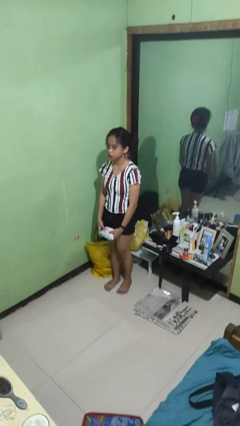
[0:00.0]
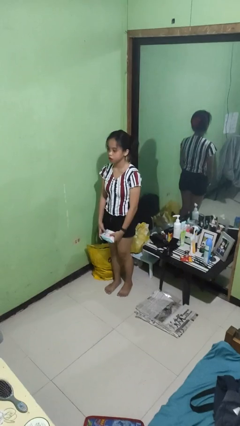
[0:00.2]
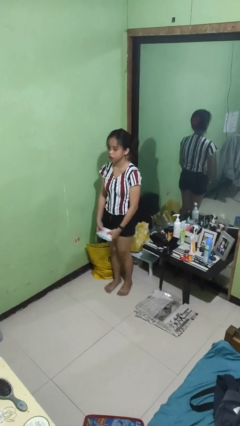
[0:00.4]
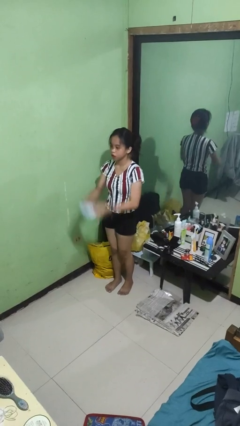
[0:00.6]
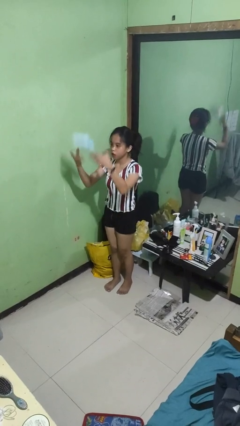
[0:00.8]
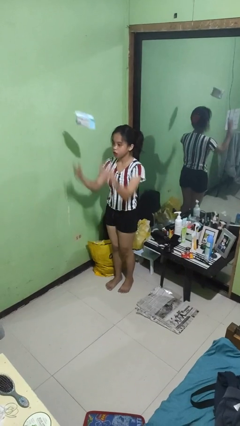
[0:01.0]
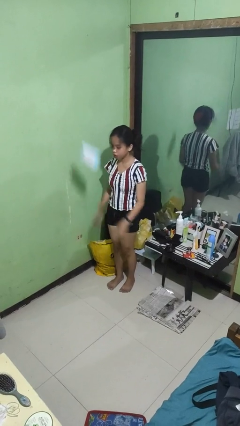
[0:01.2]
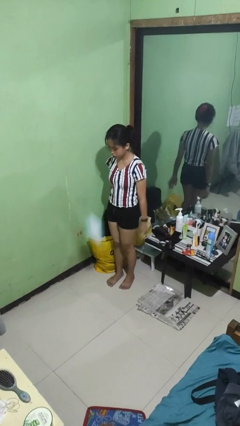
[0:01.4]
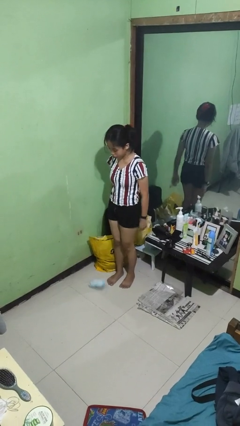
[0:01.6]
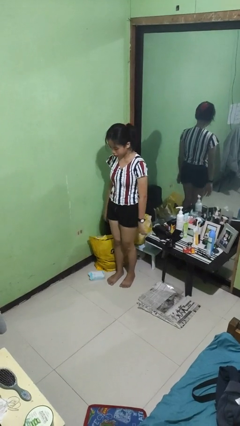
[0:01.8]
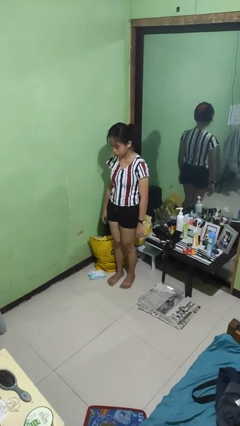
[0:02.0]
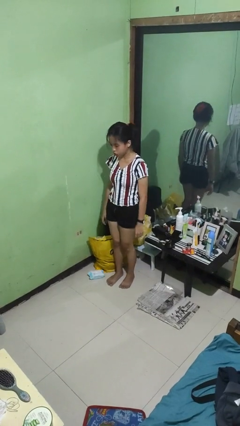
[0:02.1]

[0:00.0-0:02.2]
person throws object into air

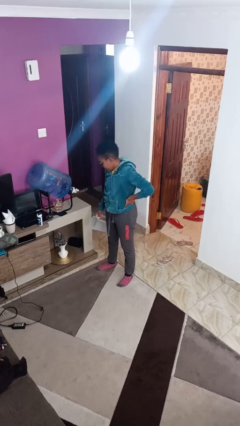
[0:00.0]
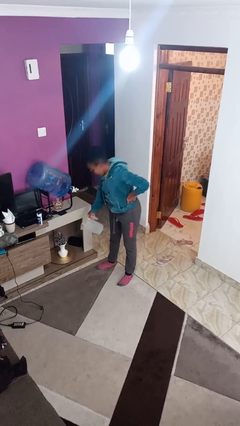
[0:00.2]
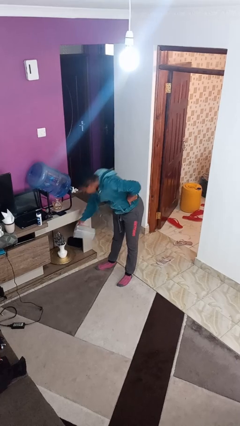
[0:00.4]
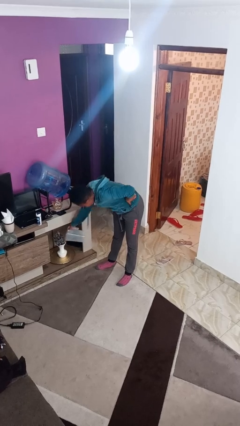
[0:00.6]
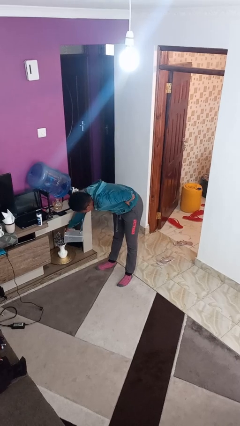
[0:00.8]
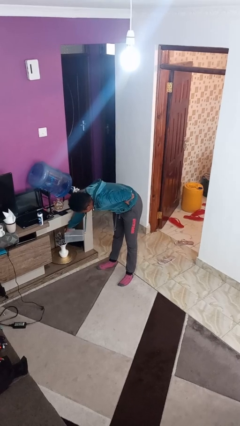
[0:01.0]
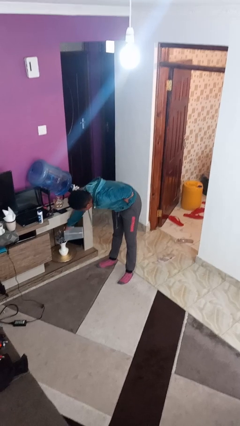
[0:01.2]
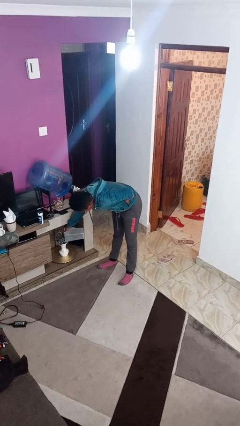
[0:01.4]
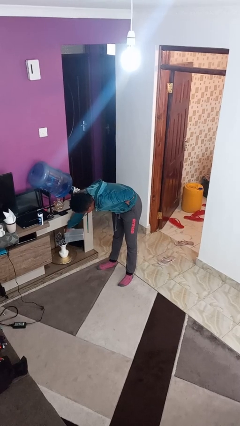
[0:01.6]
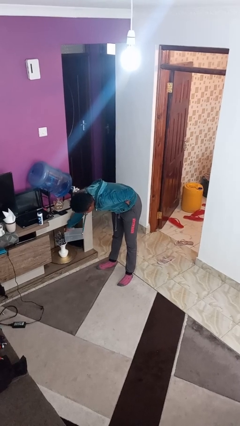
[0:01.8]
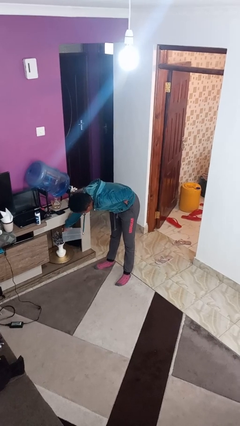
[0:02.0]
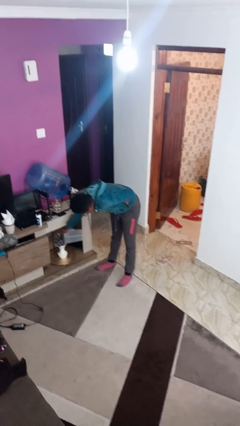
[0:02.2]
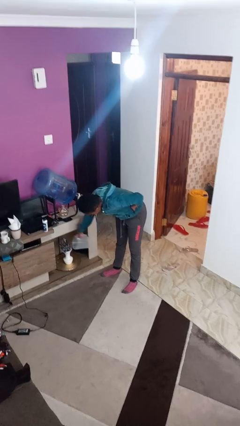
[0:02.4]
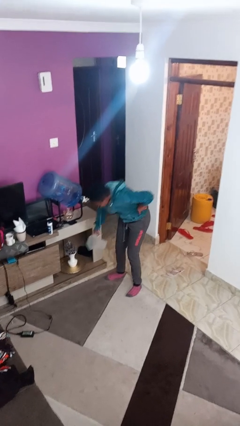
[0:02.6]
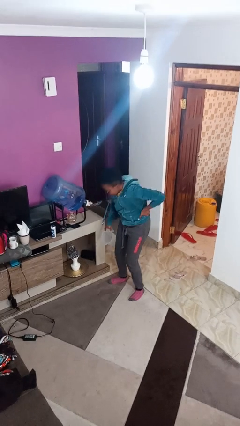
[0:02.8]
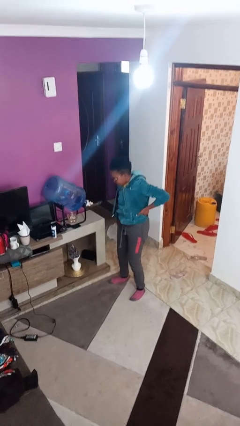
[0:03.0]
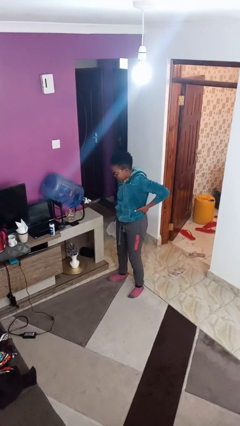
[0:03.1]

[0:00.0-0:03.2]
person waters houseplant

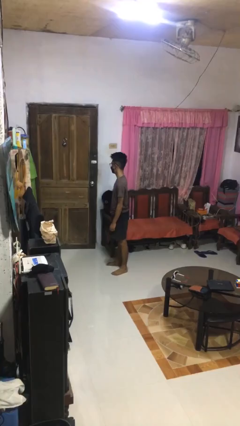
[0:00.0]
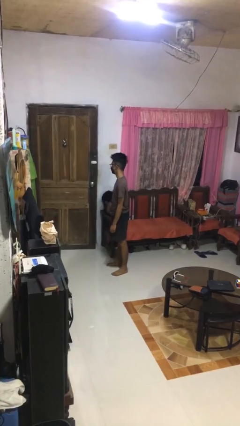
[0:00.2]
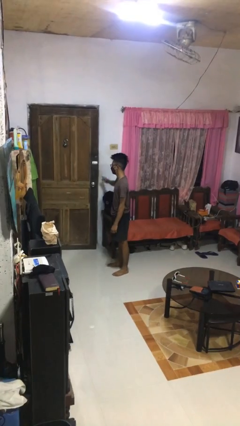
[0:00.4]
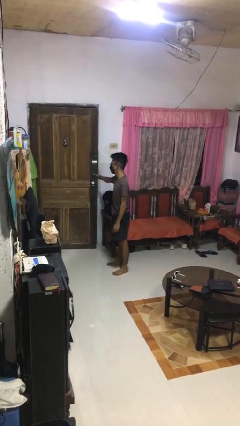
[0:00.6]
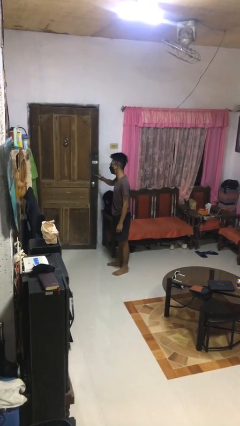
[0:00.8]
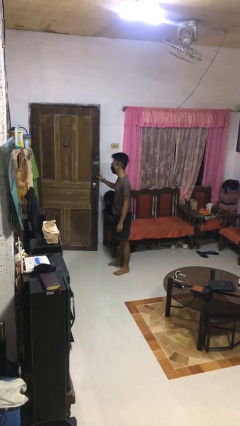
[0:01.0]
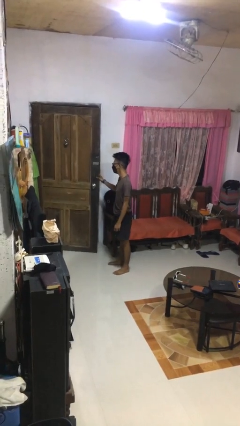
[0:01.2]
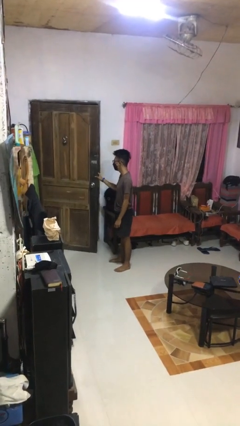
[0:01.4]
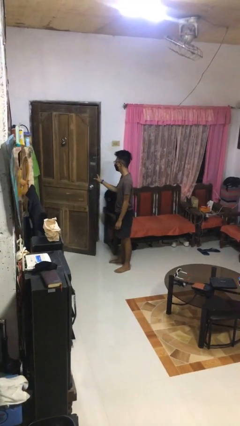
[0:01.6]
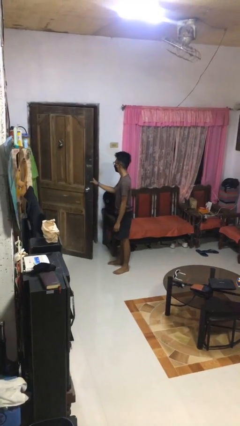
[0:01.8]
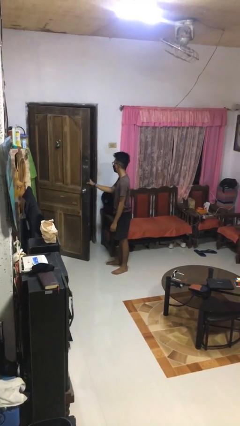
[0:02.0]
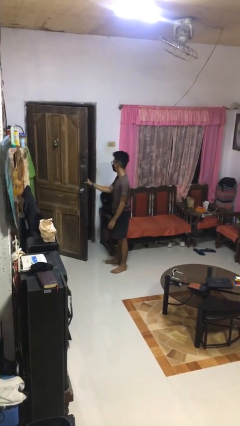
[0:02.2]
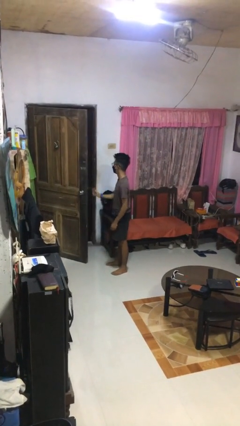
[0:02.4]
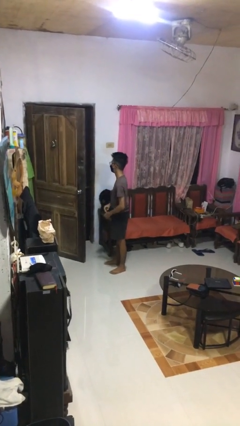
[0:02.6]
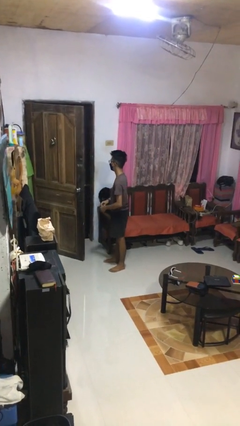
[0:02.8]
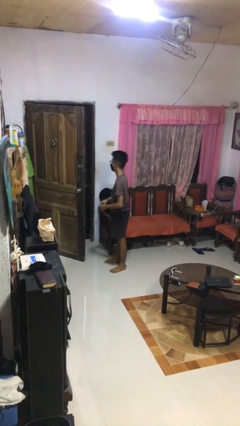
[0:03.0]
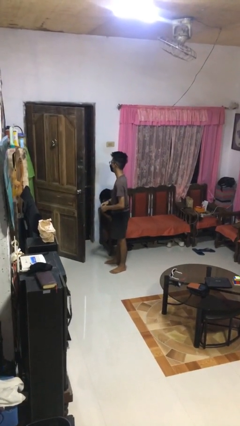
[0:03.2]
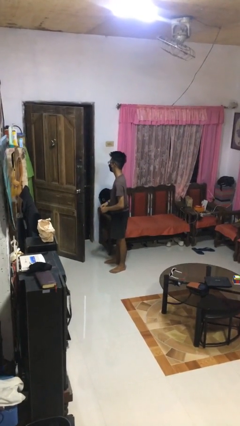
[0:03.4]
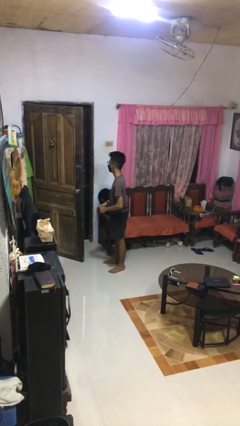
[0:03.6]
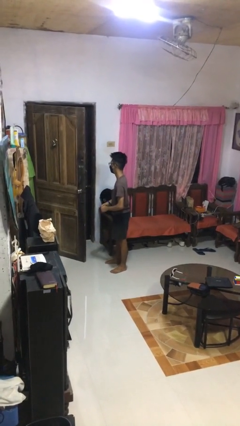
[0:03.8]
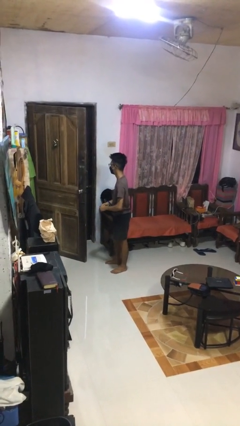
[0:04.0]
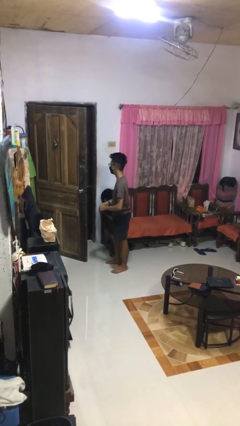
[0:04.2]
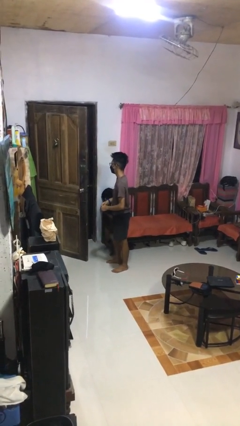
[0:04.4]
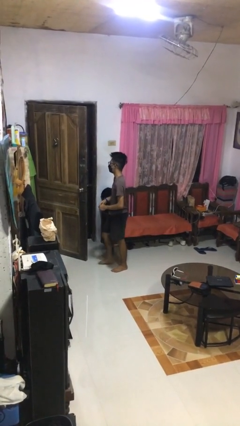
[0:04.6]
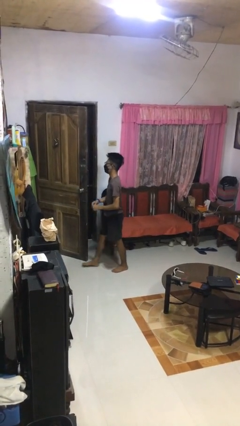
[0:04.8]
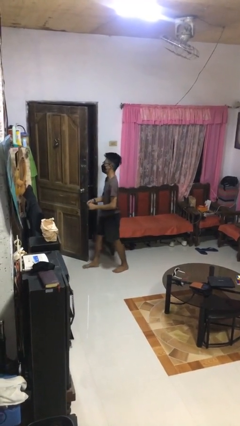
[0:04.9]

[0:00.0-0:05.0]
person opens facility door

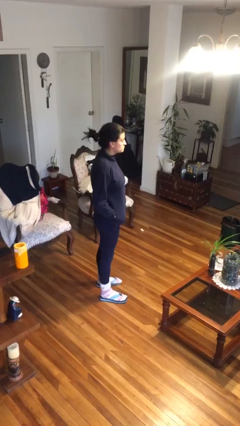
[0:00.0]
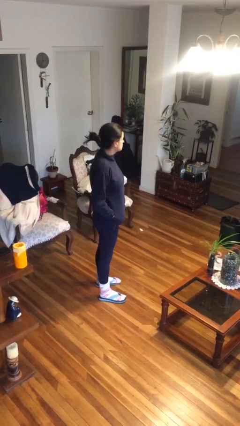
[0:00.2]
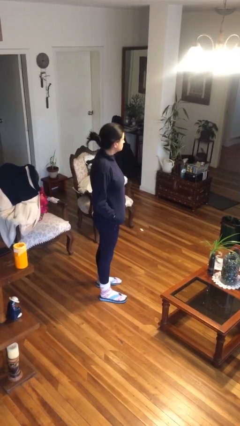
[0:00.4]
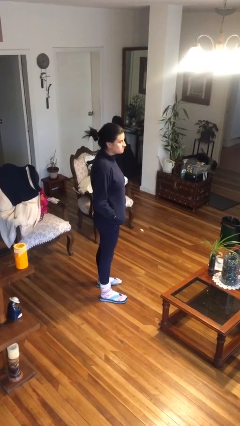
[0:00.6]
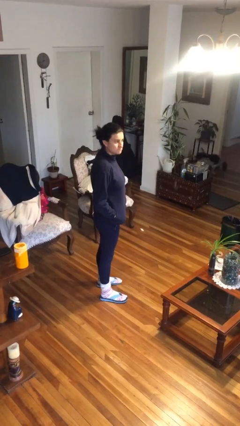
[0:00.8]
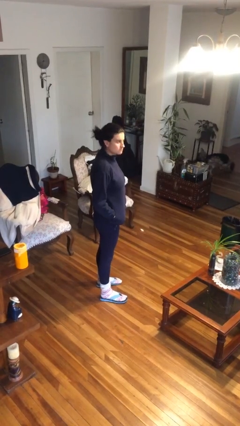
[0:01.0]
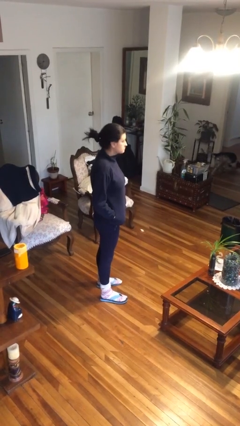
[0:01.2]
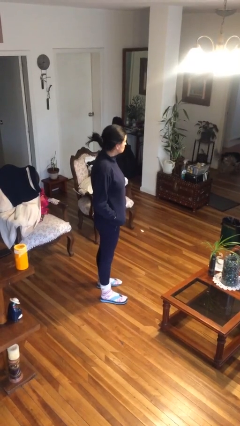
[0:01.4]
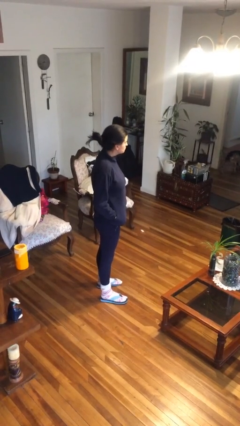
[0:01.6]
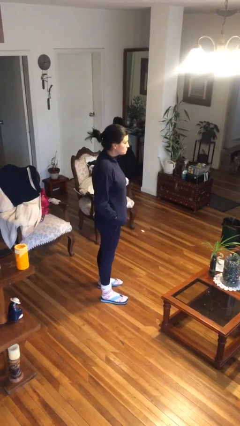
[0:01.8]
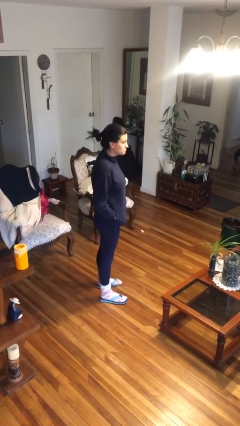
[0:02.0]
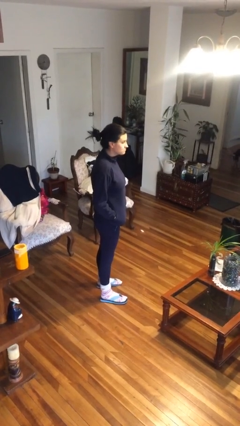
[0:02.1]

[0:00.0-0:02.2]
person shakes head

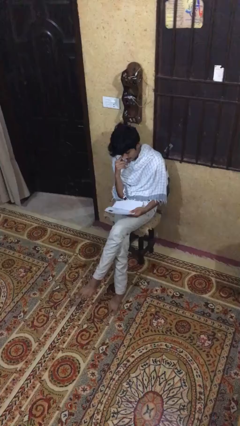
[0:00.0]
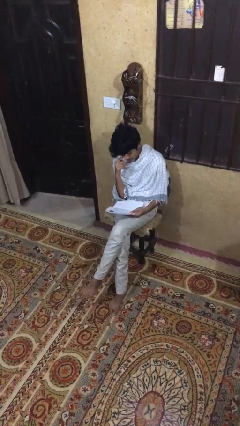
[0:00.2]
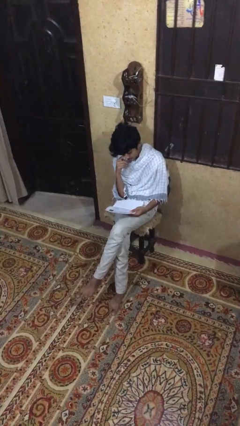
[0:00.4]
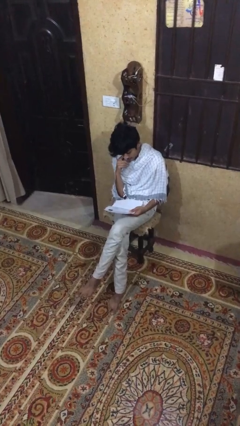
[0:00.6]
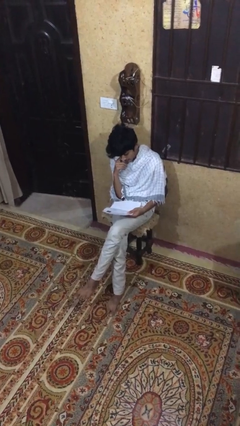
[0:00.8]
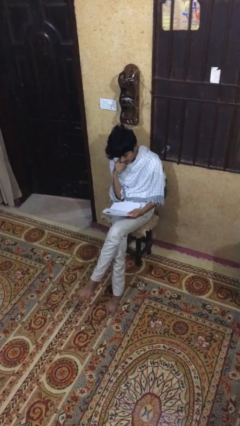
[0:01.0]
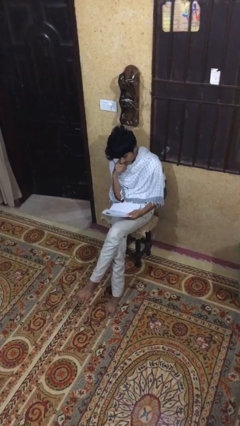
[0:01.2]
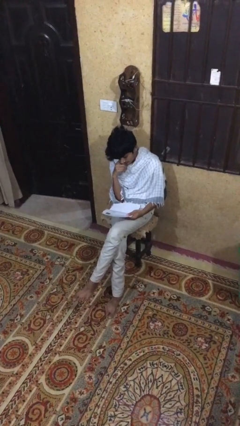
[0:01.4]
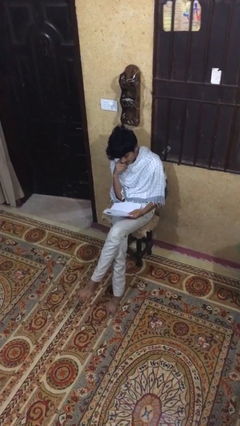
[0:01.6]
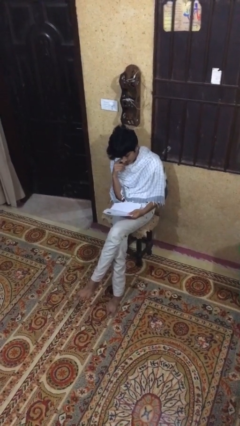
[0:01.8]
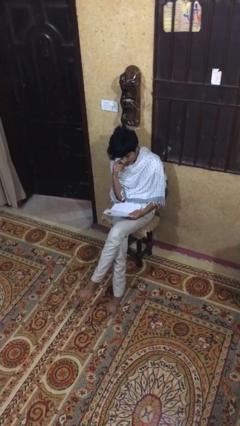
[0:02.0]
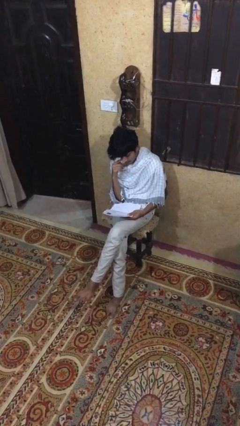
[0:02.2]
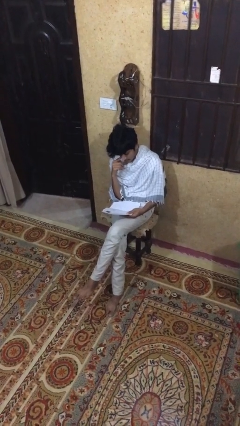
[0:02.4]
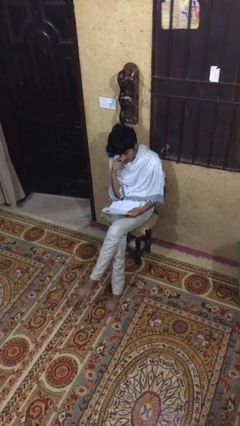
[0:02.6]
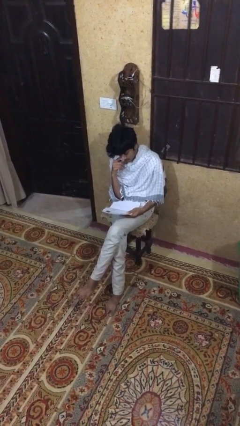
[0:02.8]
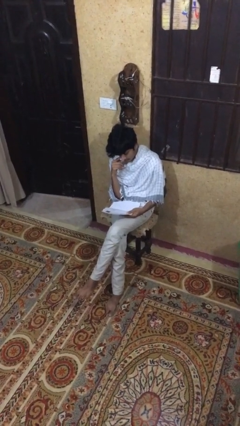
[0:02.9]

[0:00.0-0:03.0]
person reads document

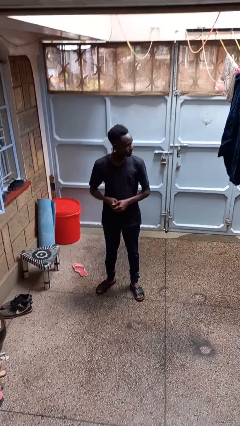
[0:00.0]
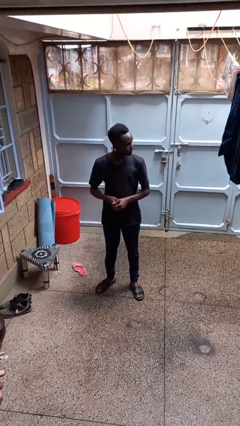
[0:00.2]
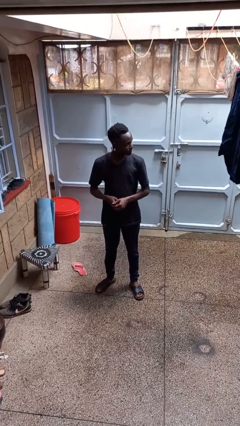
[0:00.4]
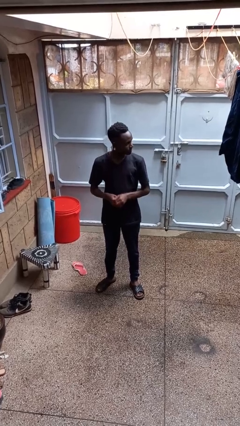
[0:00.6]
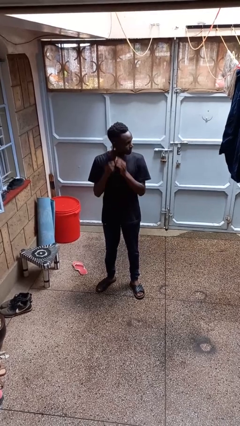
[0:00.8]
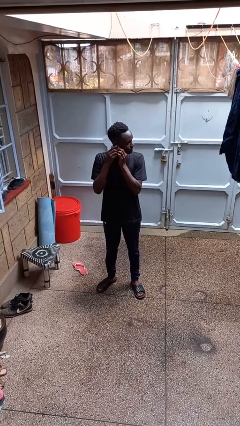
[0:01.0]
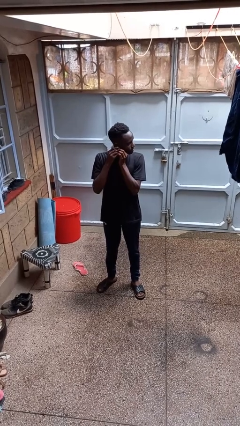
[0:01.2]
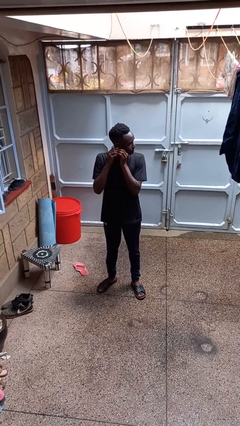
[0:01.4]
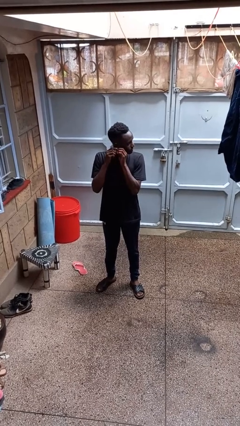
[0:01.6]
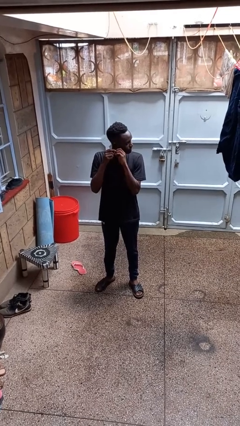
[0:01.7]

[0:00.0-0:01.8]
person takes off earrings
